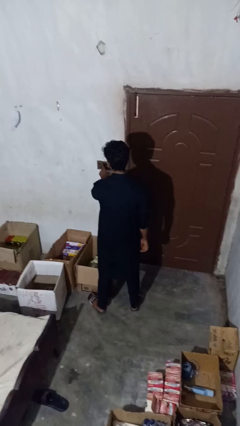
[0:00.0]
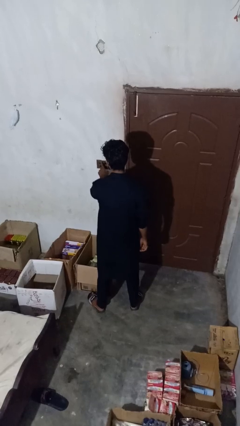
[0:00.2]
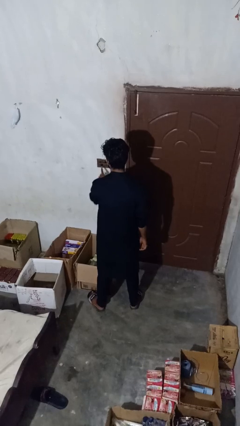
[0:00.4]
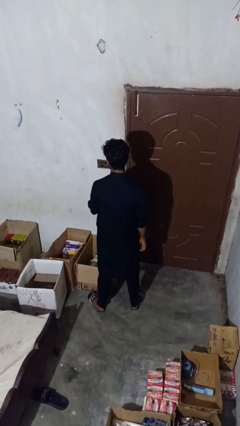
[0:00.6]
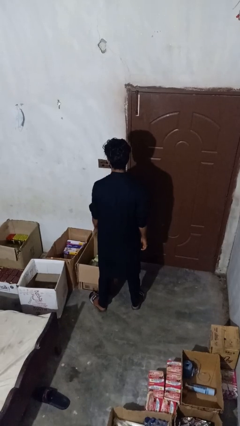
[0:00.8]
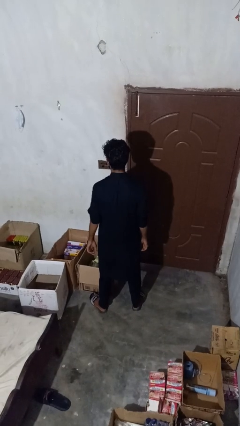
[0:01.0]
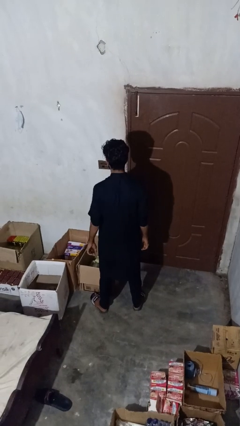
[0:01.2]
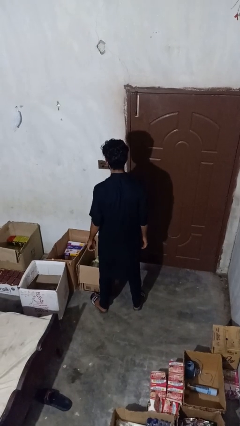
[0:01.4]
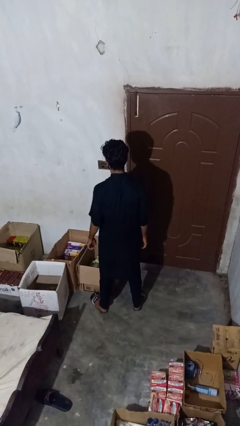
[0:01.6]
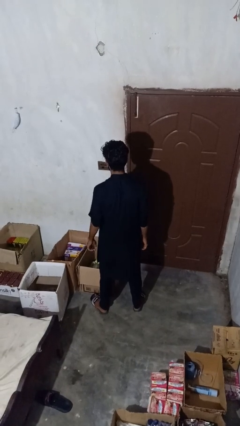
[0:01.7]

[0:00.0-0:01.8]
person turns off fan

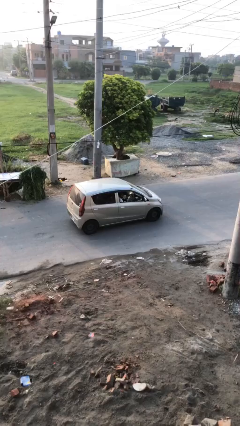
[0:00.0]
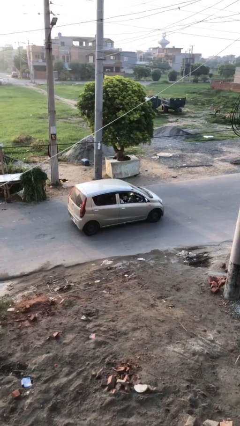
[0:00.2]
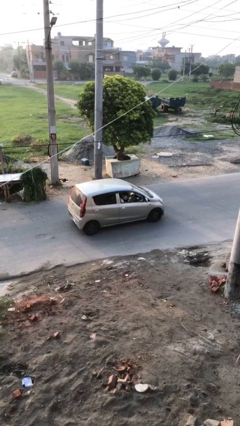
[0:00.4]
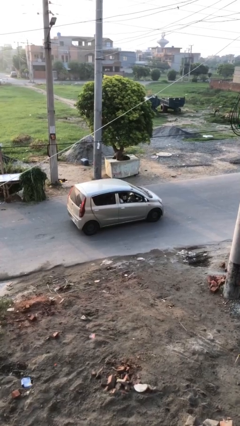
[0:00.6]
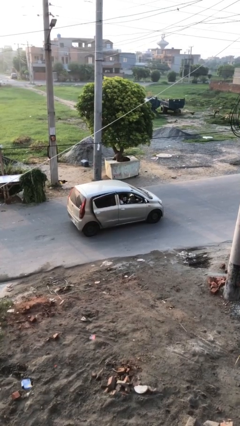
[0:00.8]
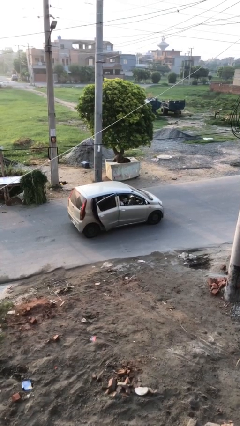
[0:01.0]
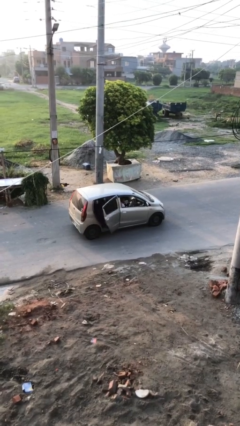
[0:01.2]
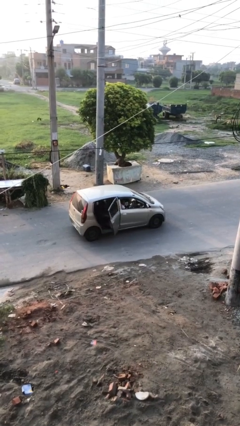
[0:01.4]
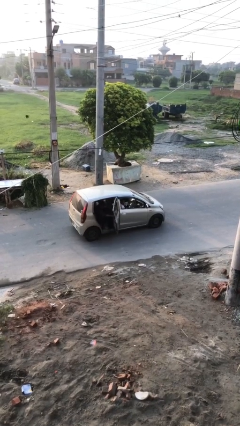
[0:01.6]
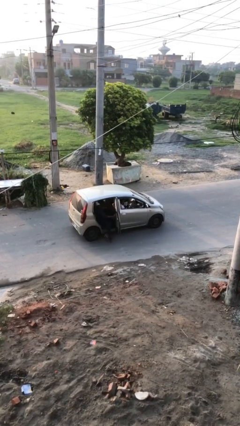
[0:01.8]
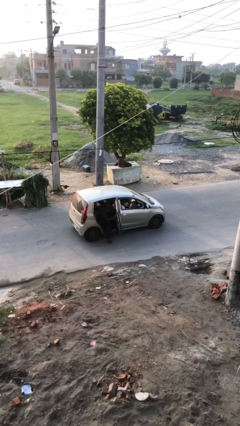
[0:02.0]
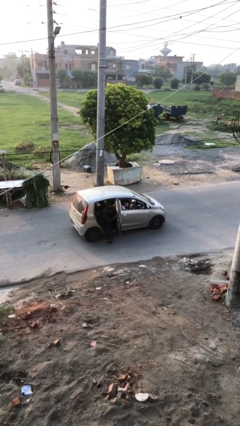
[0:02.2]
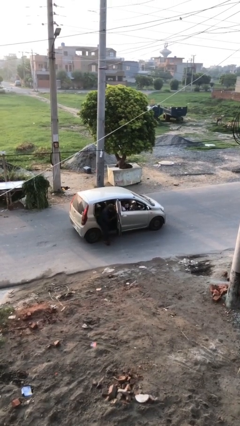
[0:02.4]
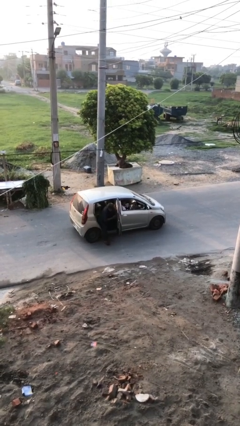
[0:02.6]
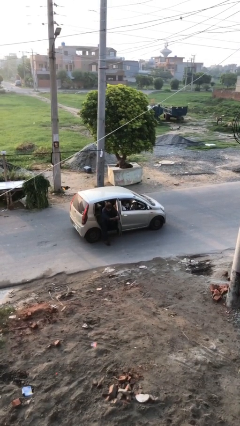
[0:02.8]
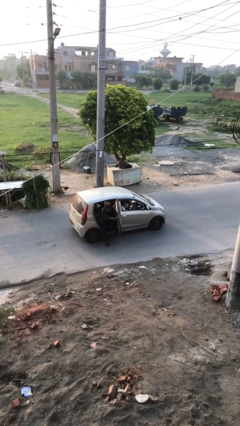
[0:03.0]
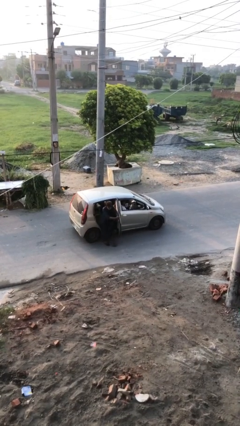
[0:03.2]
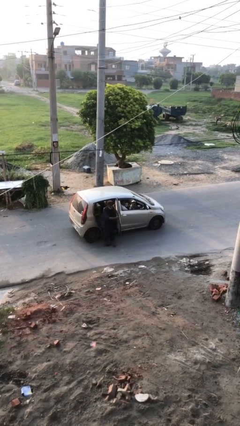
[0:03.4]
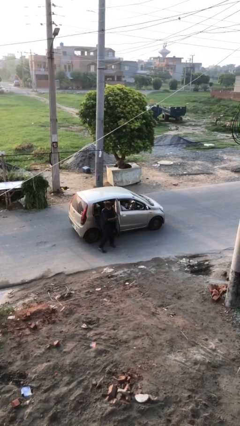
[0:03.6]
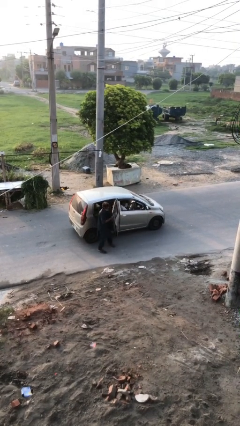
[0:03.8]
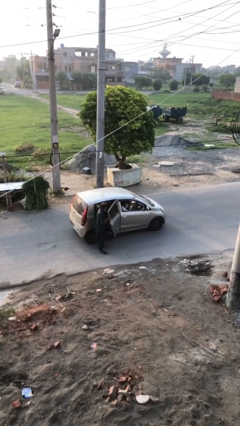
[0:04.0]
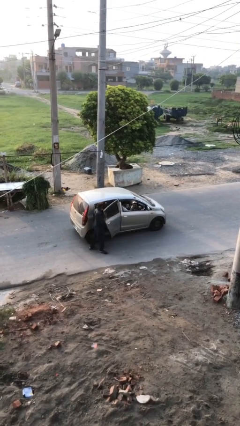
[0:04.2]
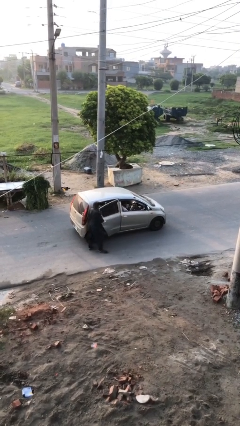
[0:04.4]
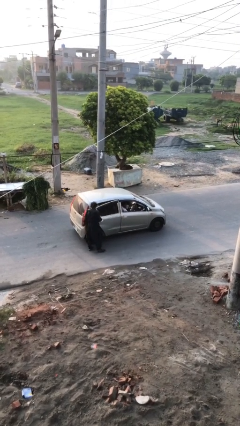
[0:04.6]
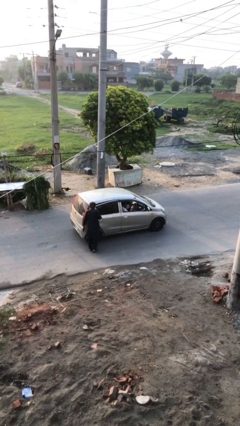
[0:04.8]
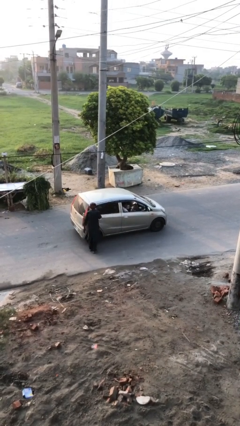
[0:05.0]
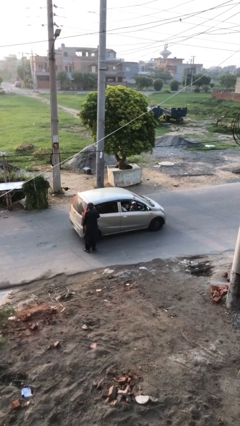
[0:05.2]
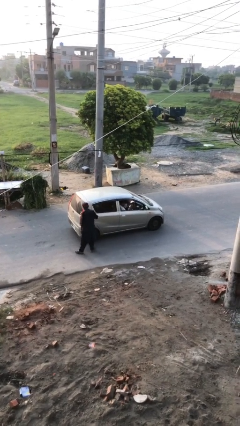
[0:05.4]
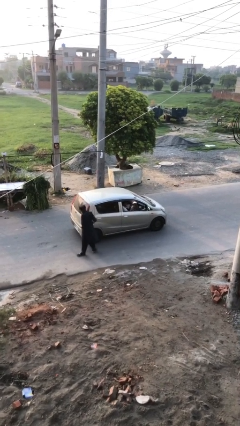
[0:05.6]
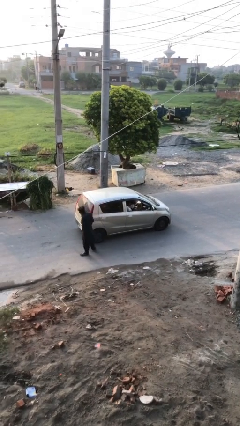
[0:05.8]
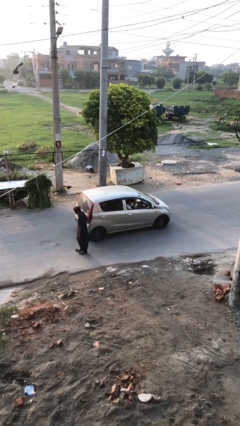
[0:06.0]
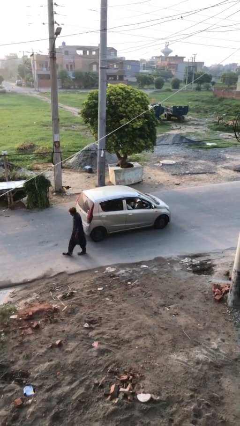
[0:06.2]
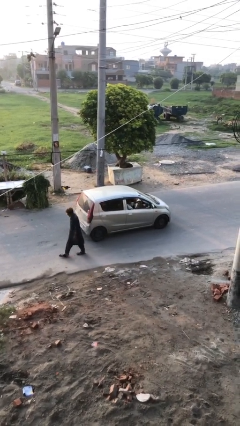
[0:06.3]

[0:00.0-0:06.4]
car drops off person

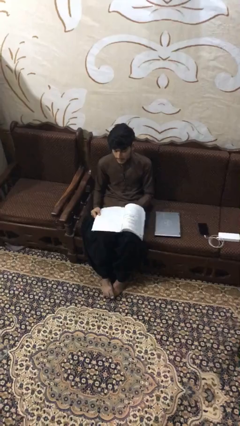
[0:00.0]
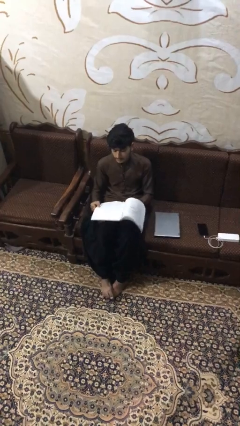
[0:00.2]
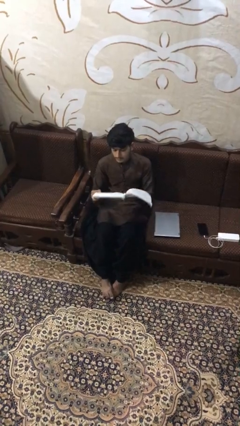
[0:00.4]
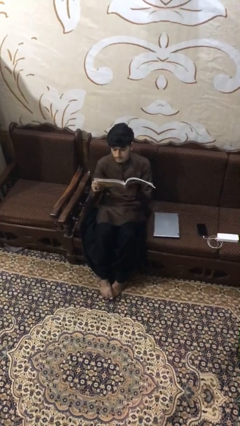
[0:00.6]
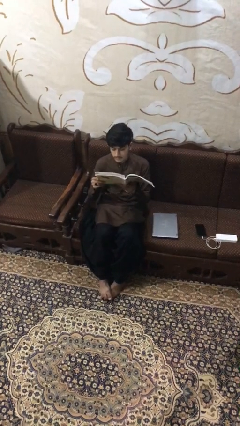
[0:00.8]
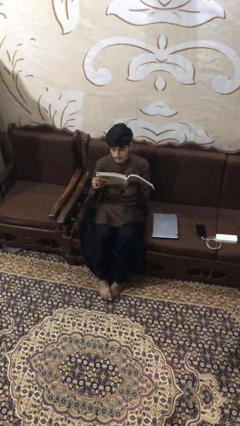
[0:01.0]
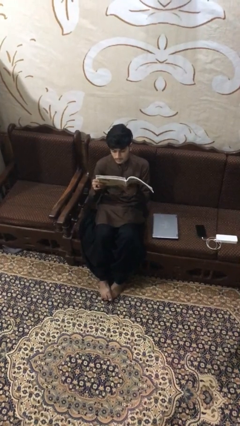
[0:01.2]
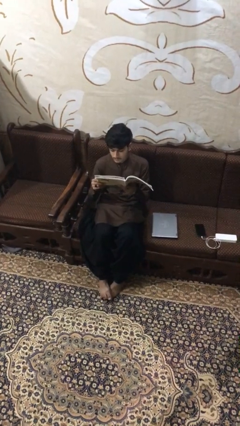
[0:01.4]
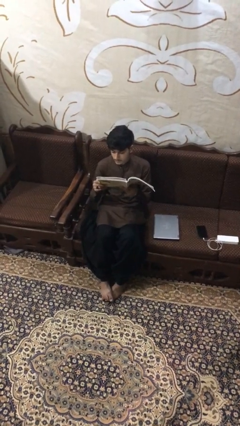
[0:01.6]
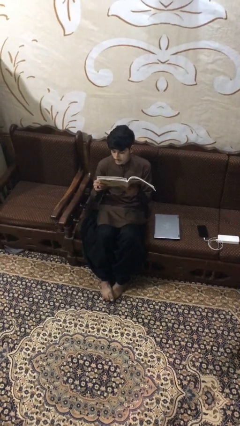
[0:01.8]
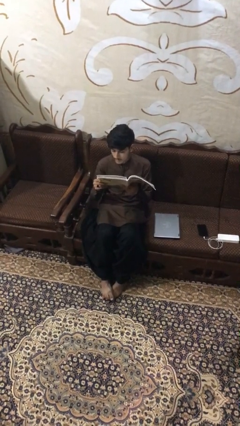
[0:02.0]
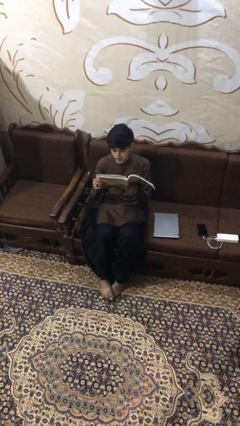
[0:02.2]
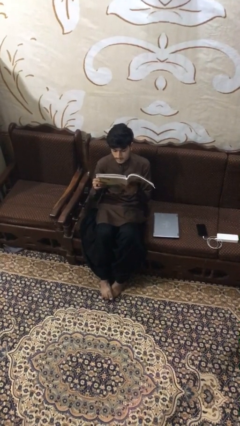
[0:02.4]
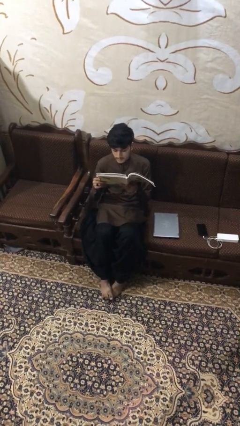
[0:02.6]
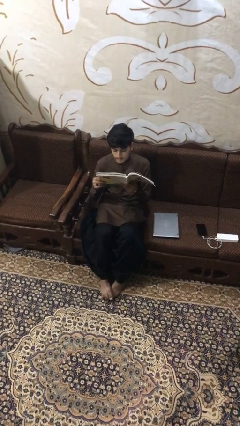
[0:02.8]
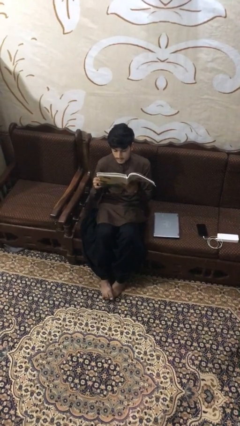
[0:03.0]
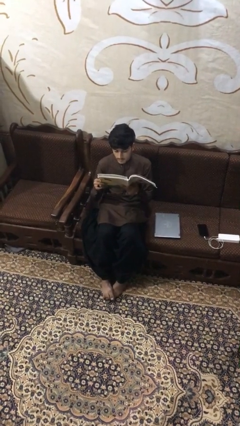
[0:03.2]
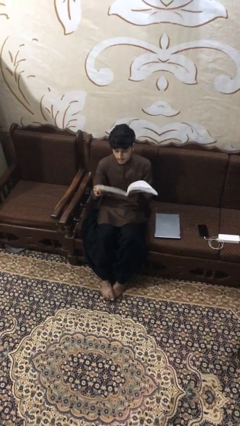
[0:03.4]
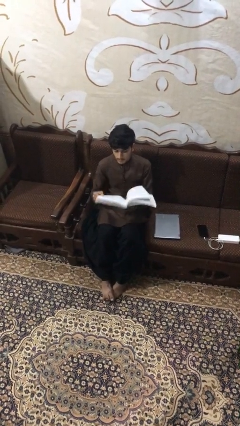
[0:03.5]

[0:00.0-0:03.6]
person reads document

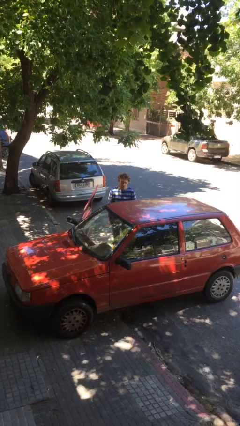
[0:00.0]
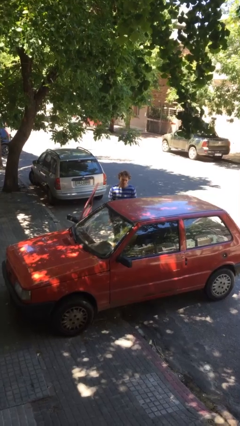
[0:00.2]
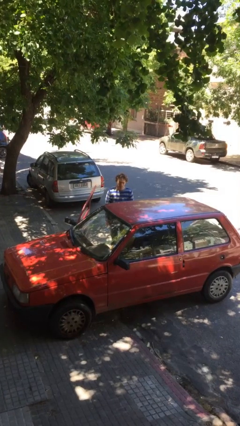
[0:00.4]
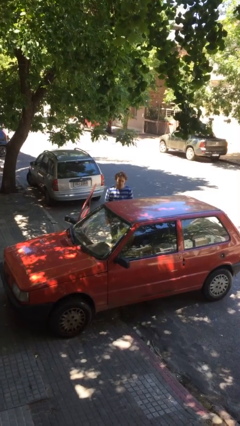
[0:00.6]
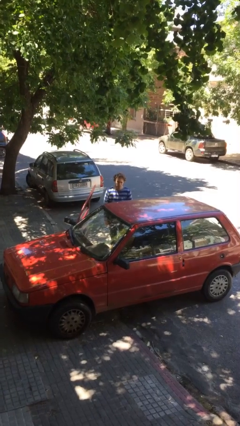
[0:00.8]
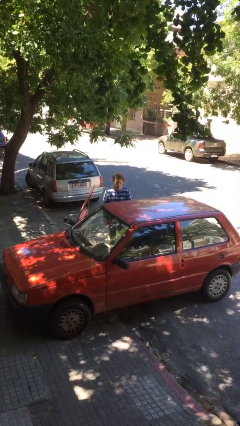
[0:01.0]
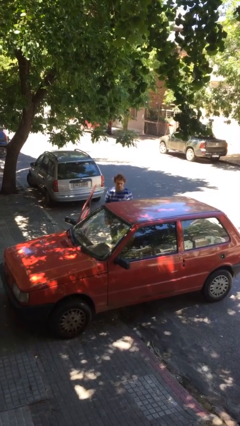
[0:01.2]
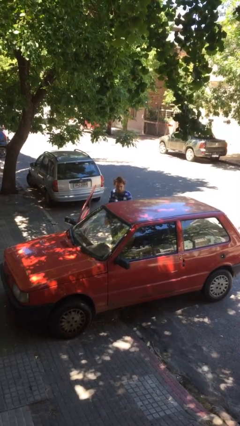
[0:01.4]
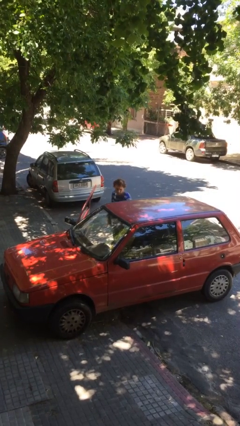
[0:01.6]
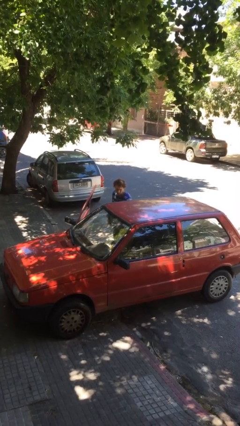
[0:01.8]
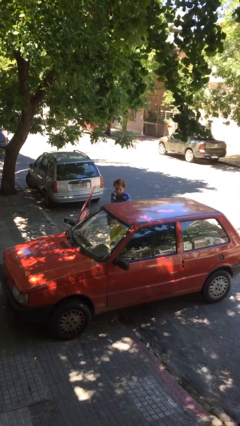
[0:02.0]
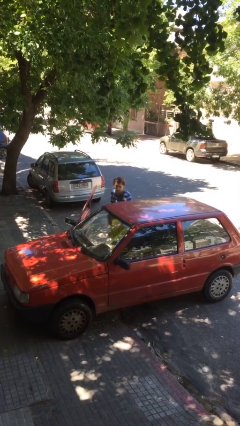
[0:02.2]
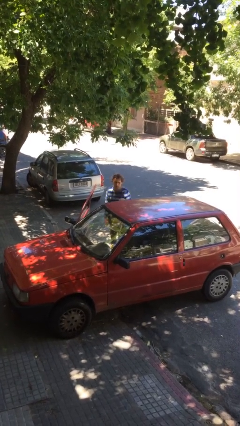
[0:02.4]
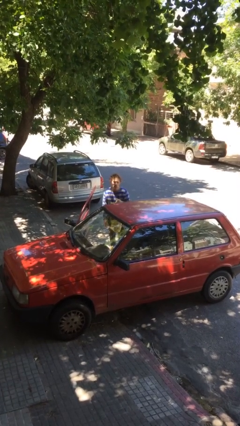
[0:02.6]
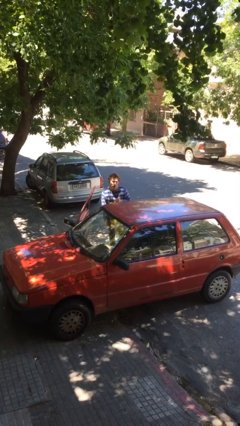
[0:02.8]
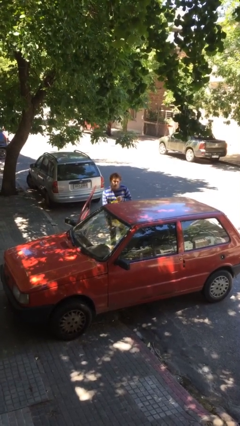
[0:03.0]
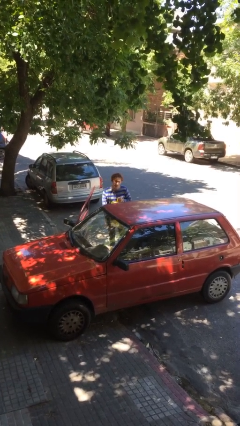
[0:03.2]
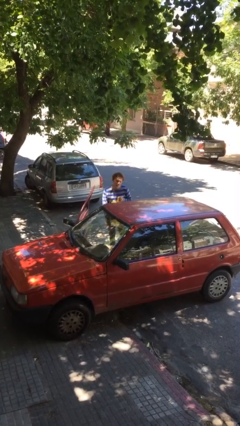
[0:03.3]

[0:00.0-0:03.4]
person unloads car

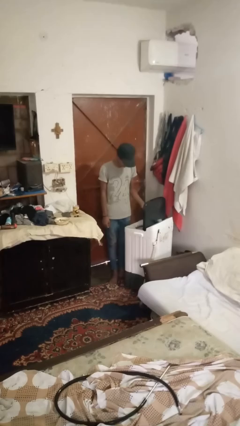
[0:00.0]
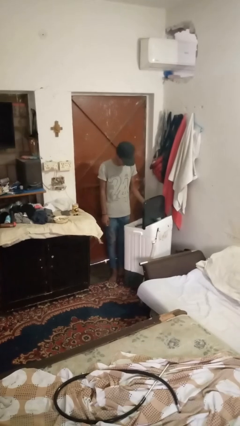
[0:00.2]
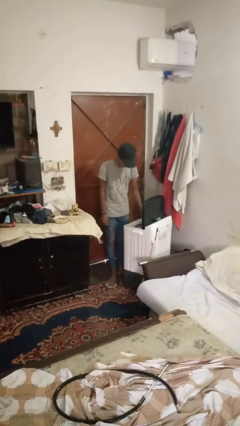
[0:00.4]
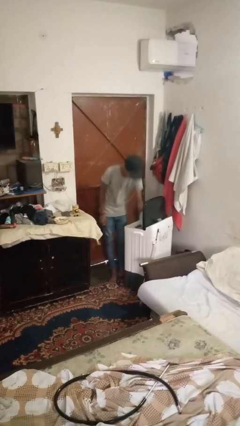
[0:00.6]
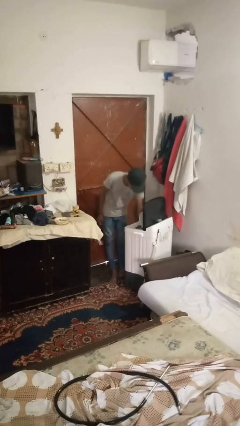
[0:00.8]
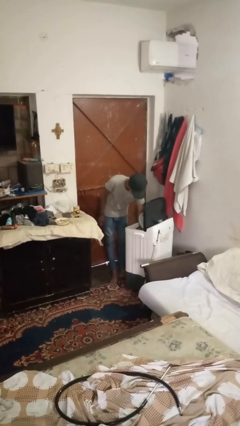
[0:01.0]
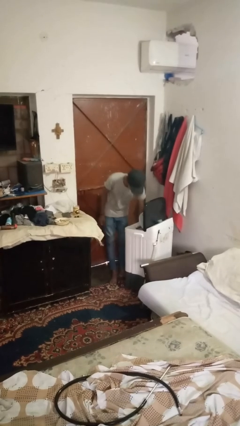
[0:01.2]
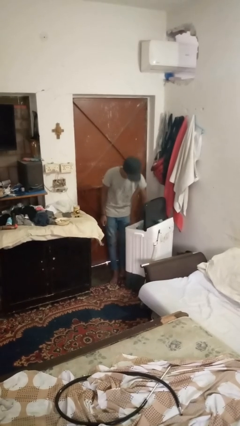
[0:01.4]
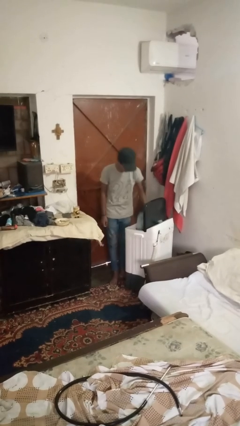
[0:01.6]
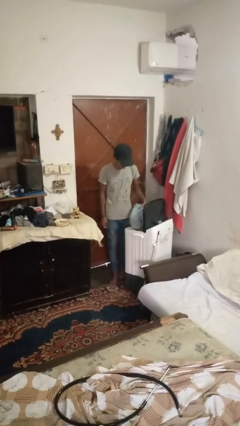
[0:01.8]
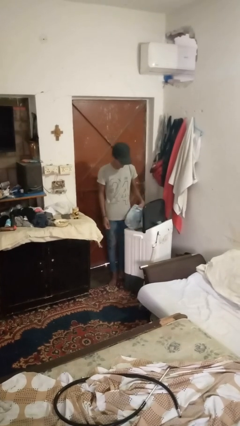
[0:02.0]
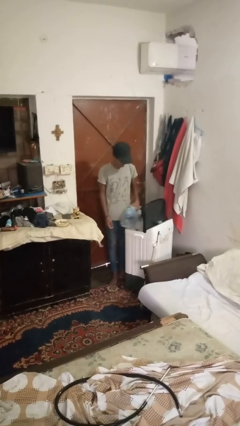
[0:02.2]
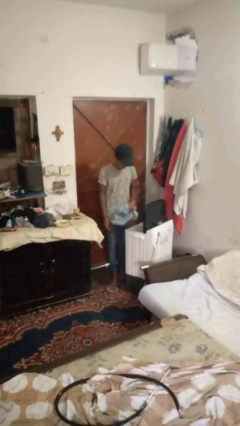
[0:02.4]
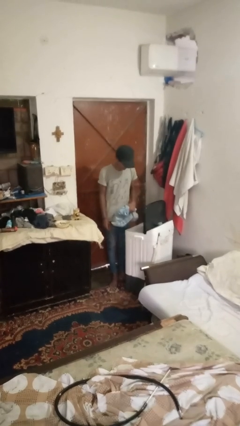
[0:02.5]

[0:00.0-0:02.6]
person unloads clotheswasher
